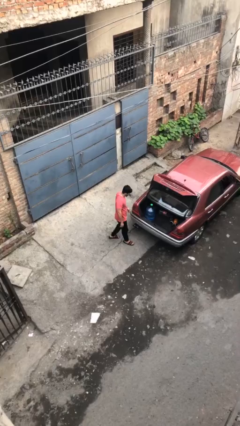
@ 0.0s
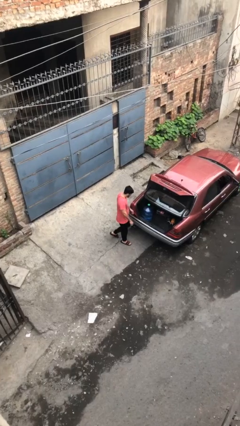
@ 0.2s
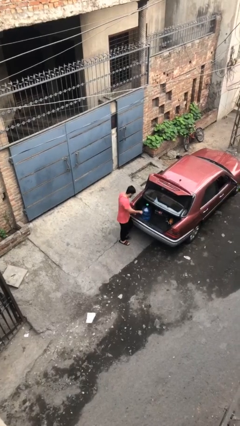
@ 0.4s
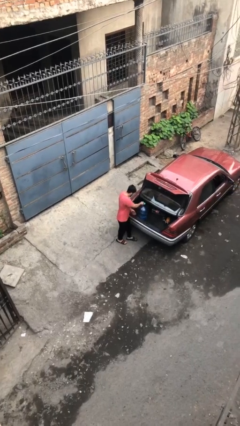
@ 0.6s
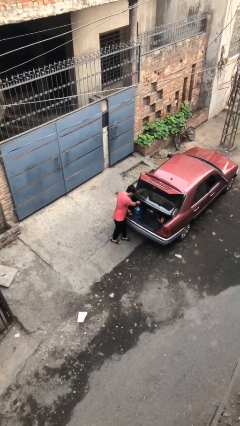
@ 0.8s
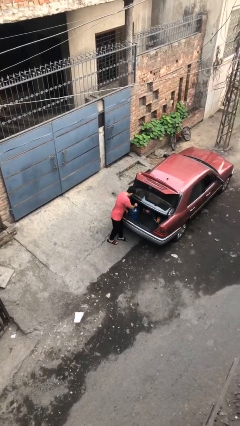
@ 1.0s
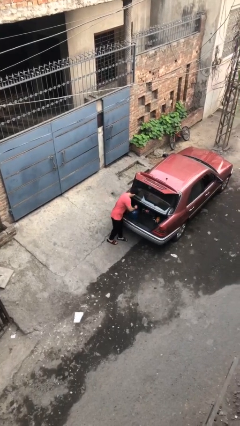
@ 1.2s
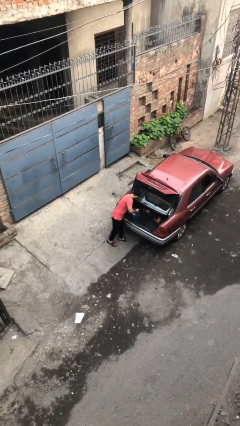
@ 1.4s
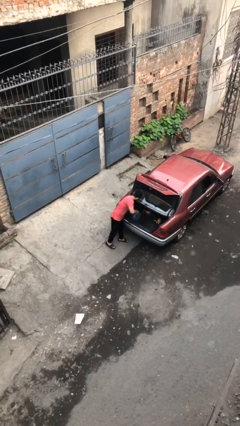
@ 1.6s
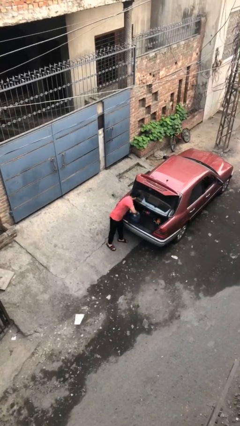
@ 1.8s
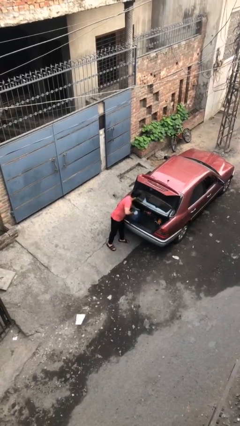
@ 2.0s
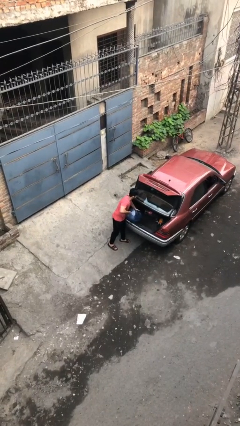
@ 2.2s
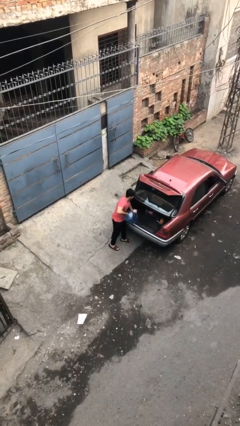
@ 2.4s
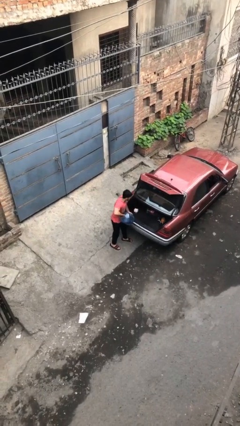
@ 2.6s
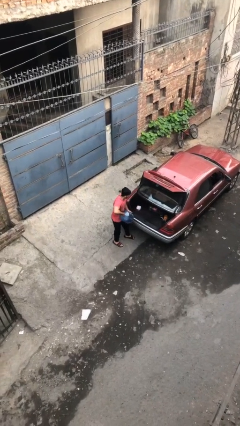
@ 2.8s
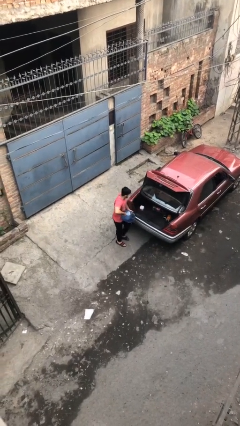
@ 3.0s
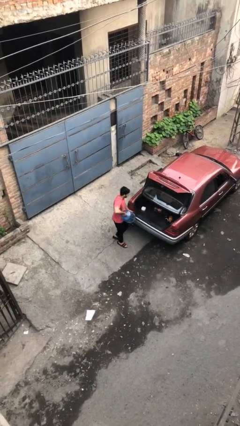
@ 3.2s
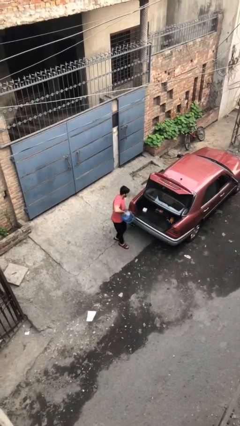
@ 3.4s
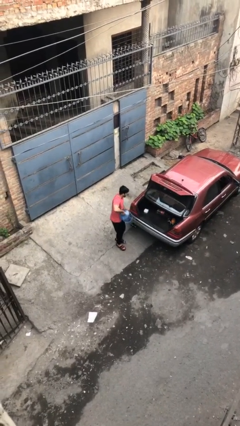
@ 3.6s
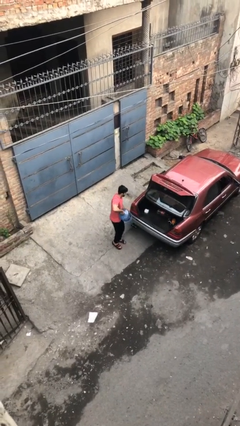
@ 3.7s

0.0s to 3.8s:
person unloads car

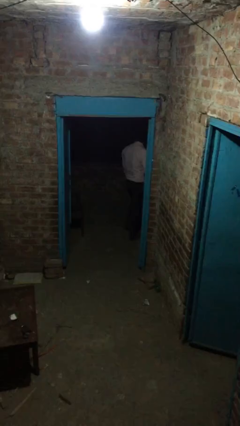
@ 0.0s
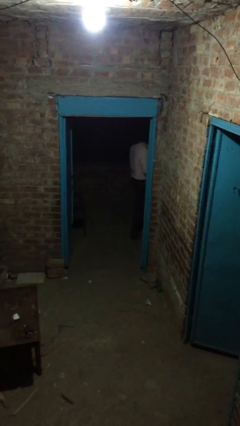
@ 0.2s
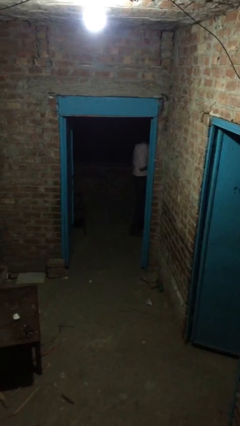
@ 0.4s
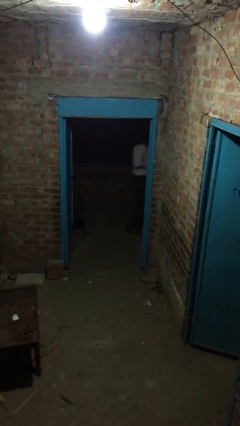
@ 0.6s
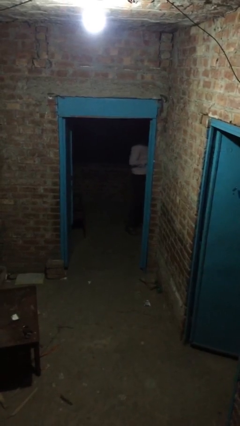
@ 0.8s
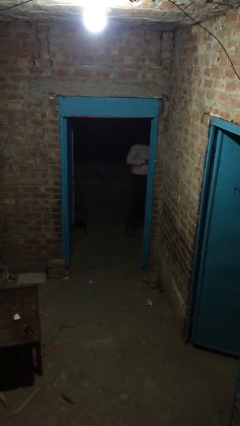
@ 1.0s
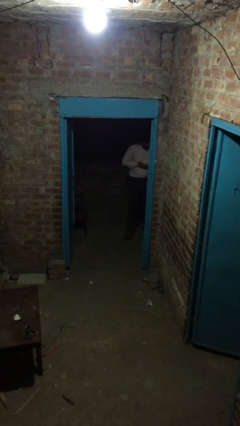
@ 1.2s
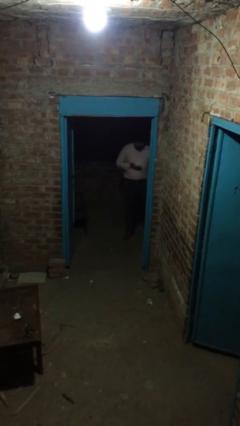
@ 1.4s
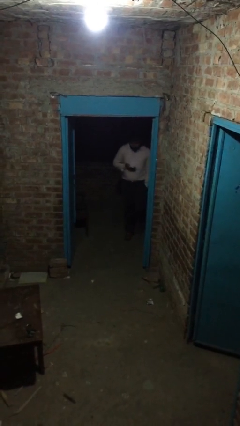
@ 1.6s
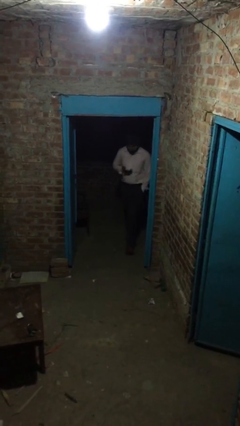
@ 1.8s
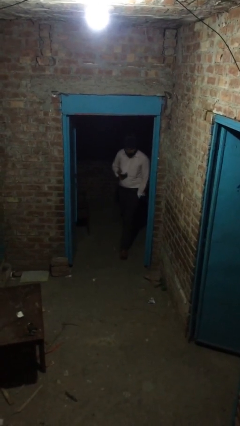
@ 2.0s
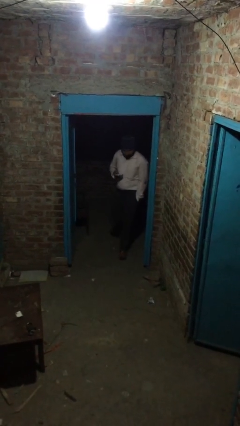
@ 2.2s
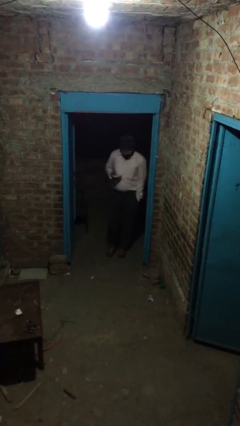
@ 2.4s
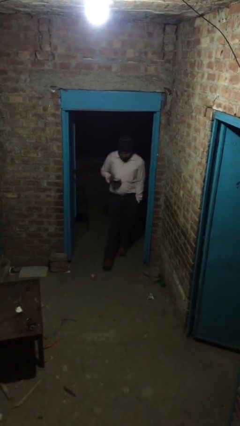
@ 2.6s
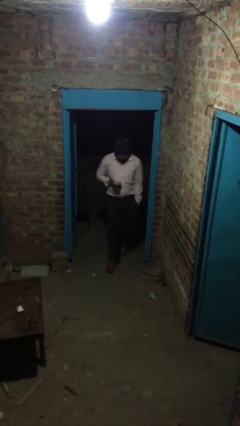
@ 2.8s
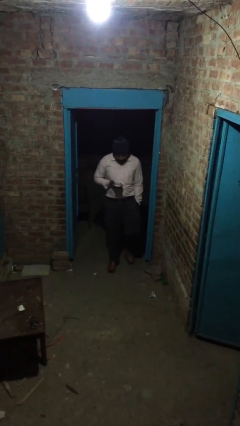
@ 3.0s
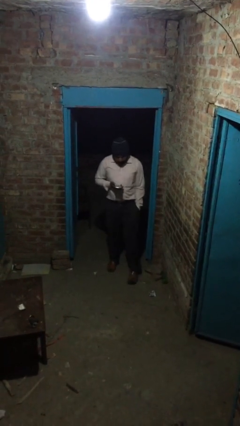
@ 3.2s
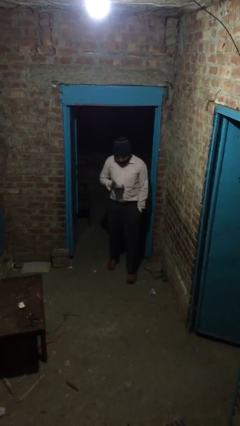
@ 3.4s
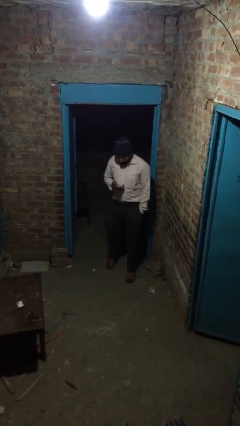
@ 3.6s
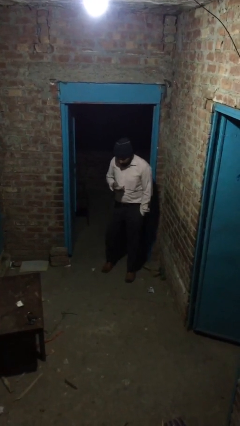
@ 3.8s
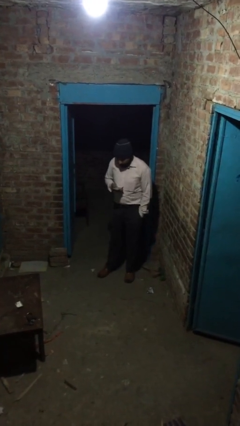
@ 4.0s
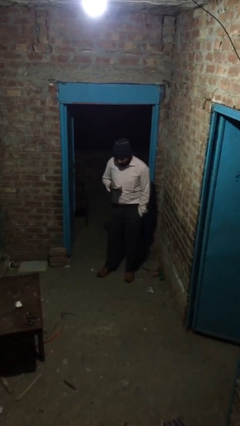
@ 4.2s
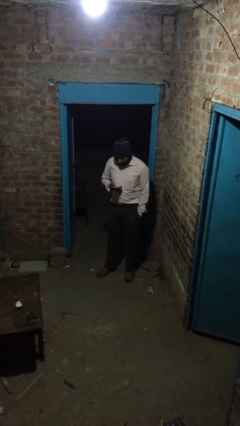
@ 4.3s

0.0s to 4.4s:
person enters scene through structure

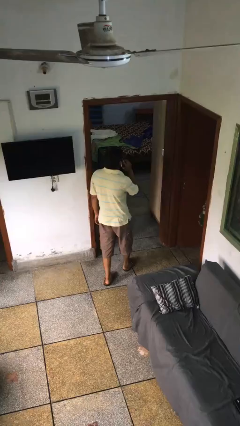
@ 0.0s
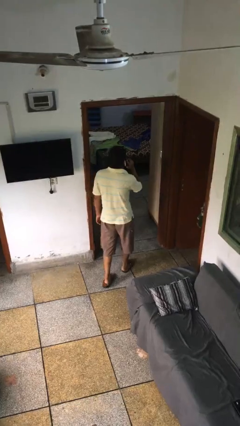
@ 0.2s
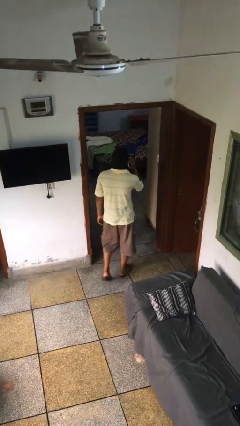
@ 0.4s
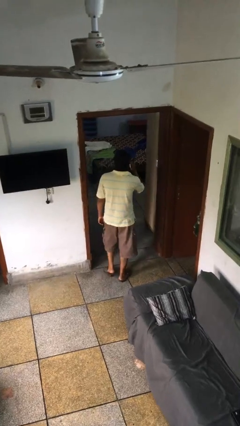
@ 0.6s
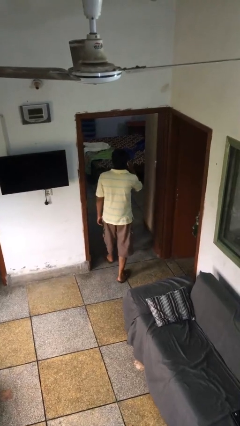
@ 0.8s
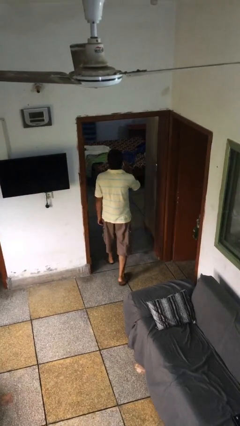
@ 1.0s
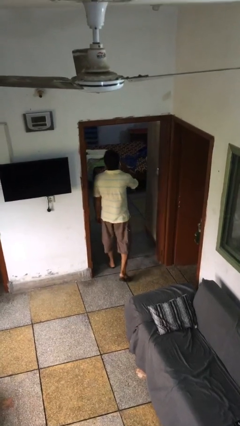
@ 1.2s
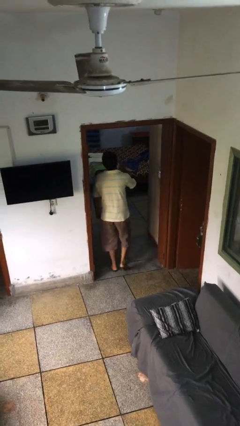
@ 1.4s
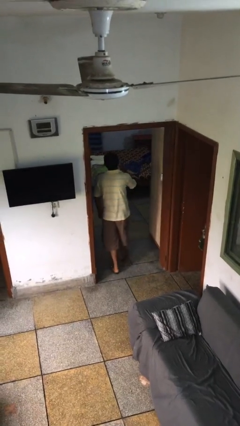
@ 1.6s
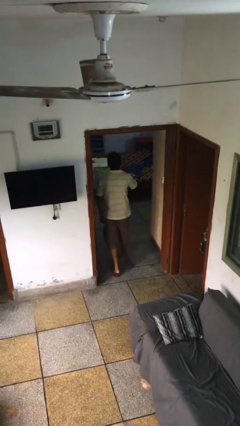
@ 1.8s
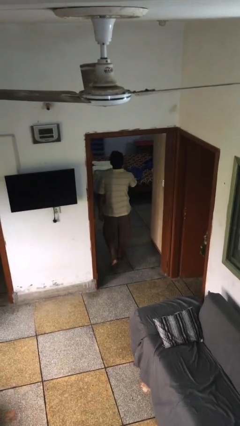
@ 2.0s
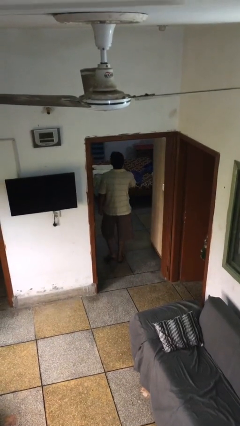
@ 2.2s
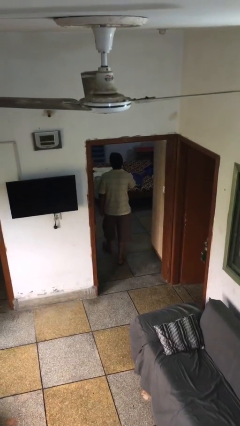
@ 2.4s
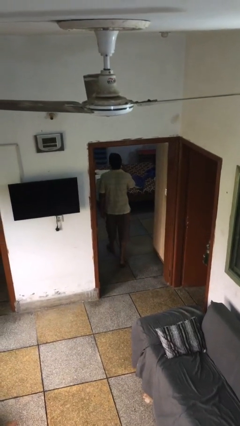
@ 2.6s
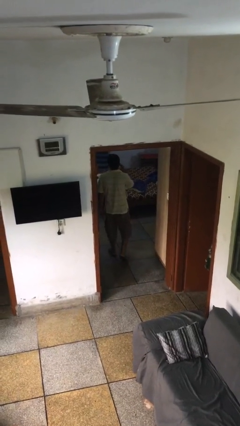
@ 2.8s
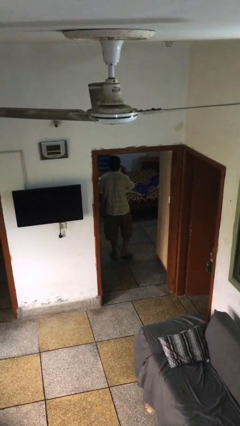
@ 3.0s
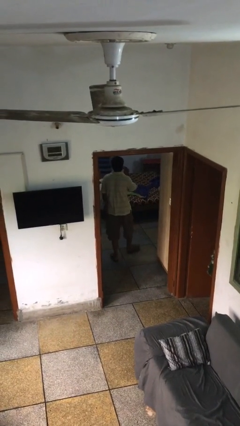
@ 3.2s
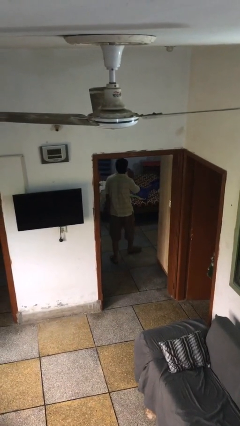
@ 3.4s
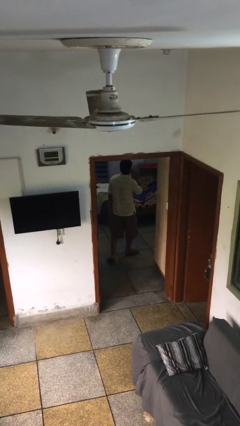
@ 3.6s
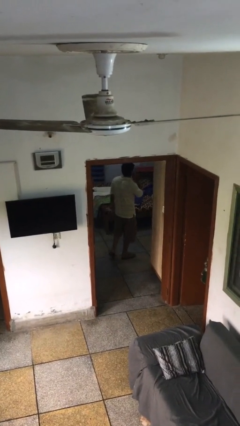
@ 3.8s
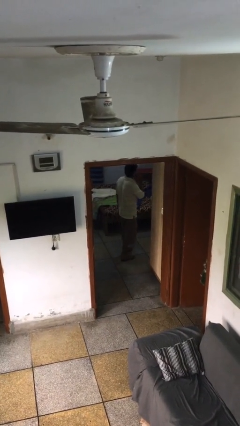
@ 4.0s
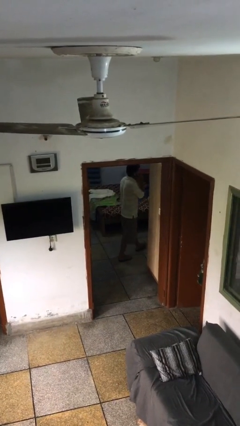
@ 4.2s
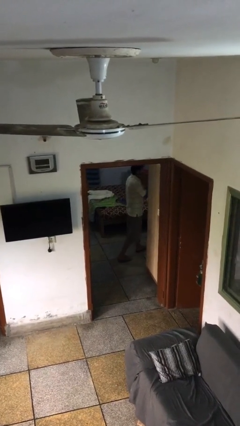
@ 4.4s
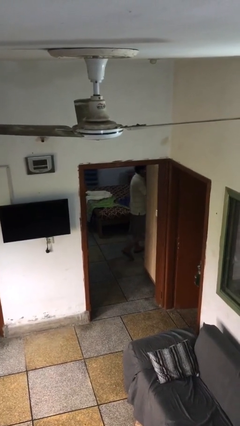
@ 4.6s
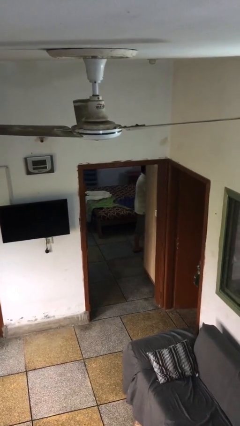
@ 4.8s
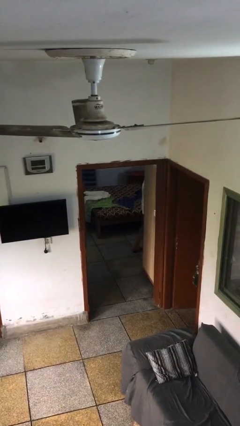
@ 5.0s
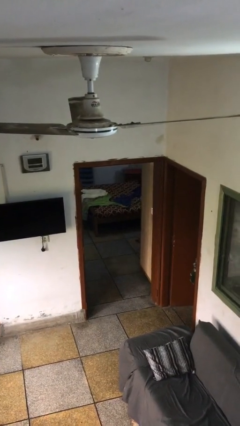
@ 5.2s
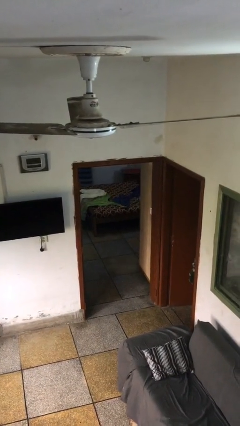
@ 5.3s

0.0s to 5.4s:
person exits scene through structure

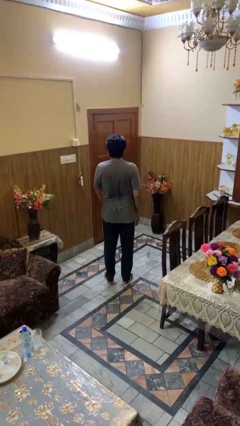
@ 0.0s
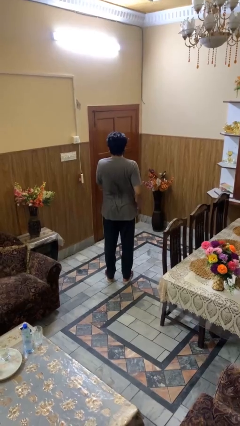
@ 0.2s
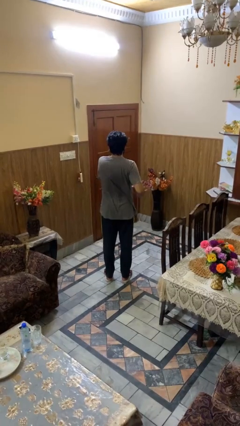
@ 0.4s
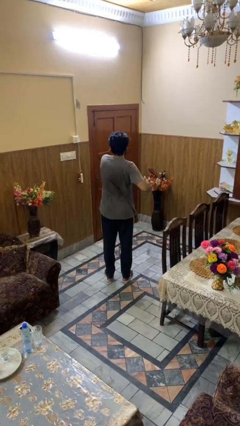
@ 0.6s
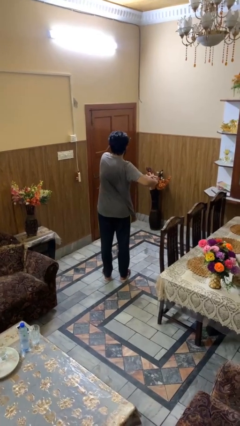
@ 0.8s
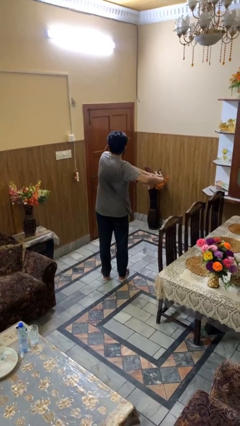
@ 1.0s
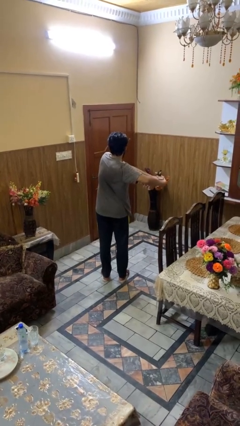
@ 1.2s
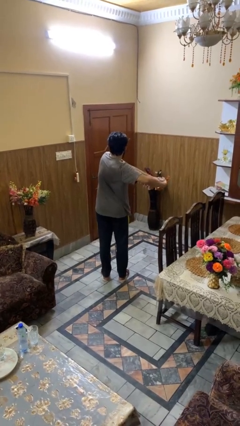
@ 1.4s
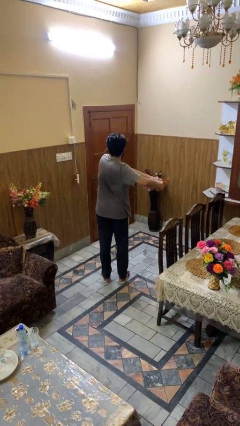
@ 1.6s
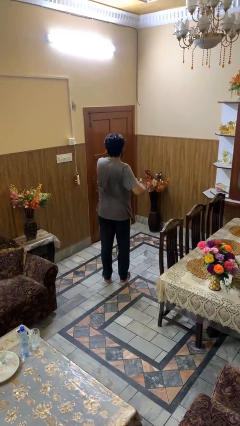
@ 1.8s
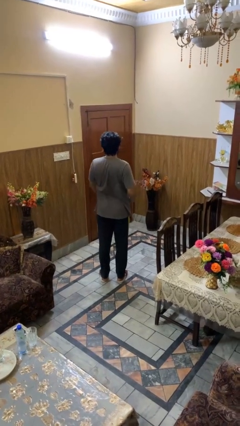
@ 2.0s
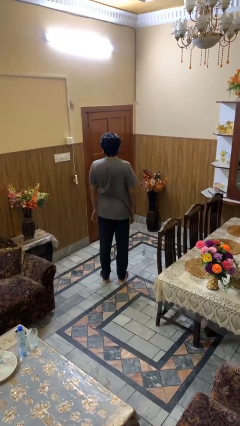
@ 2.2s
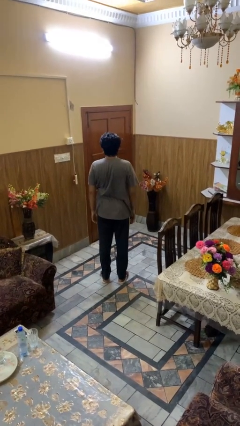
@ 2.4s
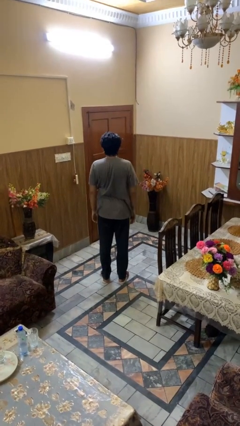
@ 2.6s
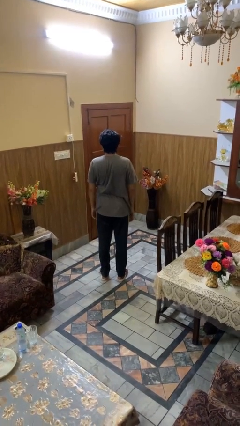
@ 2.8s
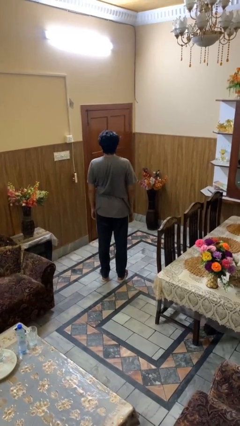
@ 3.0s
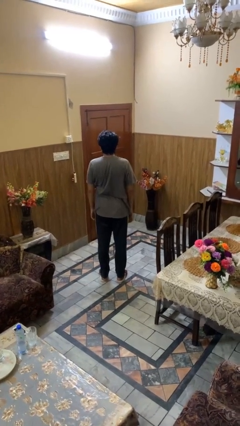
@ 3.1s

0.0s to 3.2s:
person stretches arms to side

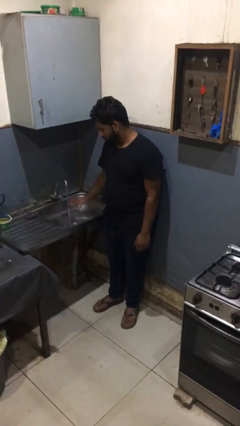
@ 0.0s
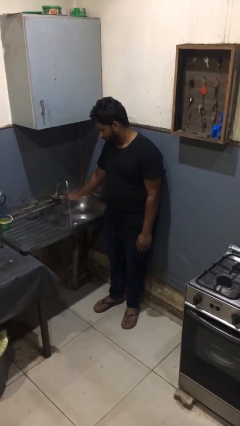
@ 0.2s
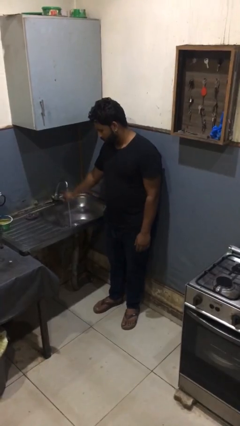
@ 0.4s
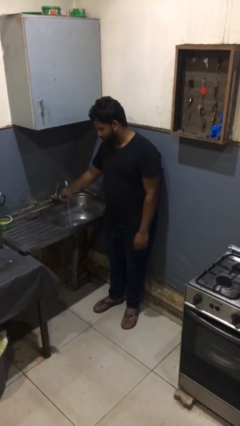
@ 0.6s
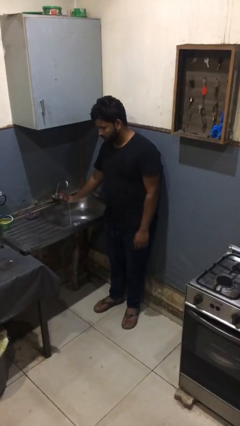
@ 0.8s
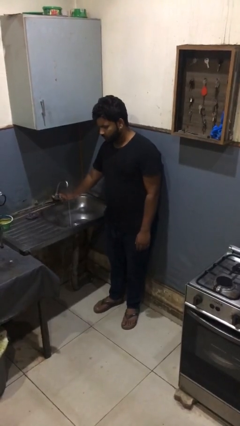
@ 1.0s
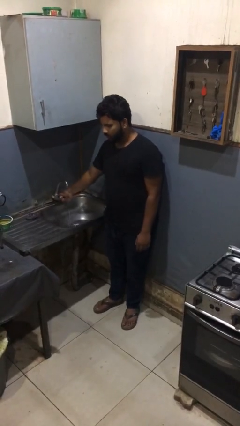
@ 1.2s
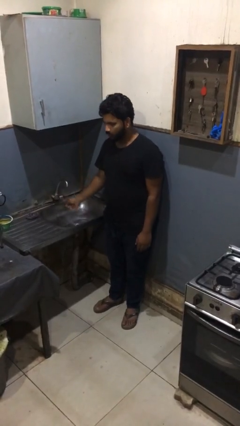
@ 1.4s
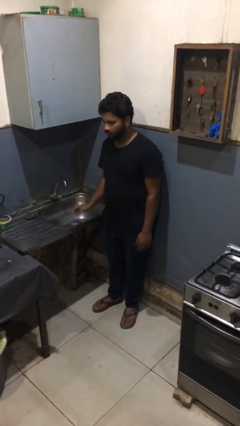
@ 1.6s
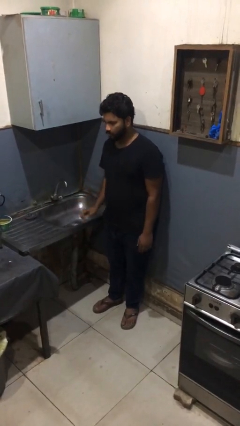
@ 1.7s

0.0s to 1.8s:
person turns off faucet
